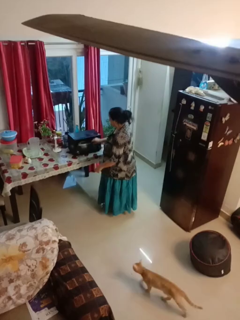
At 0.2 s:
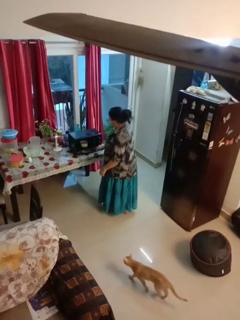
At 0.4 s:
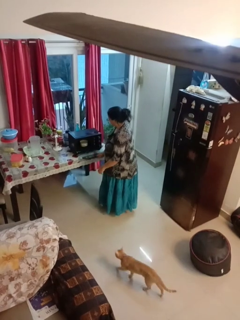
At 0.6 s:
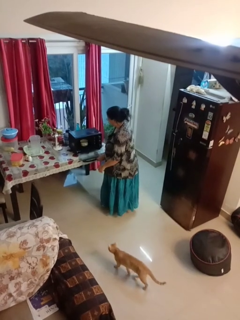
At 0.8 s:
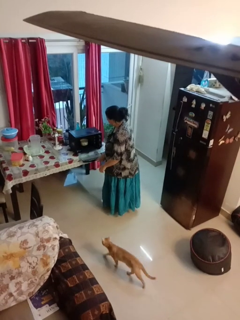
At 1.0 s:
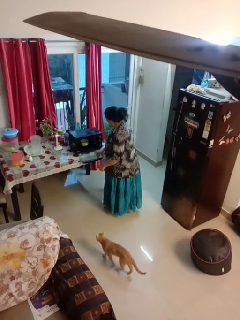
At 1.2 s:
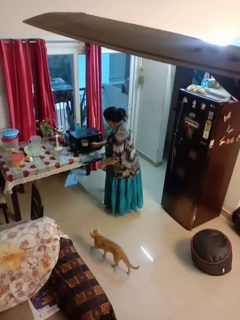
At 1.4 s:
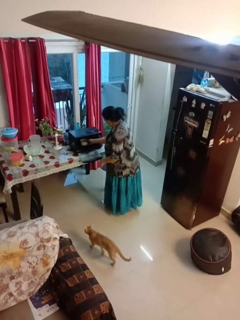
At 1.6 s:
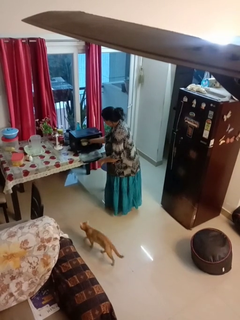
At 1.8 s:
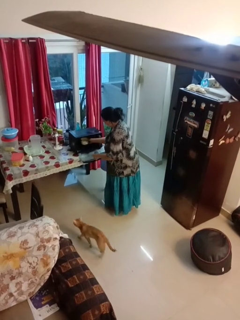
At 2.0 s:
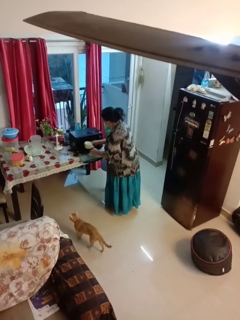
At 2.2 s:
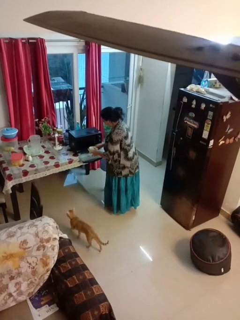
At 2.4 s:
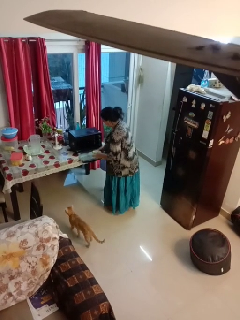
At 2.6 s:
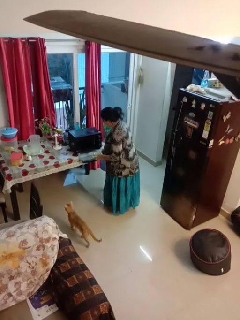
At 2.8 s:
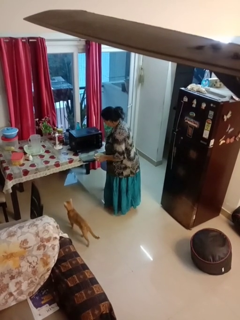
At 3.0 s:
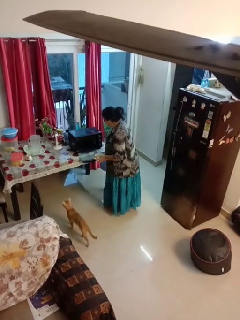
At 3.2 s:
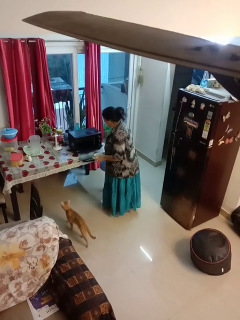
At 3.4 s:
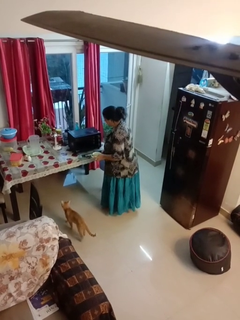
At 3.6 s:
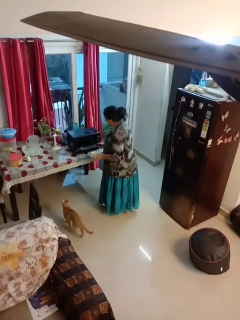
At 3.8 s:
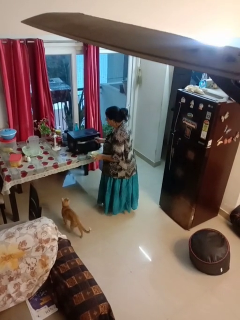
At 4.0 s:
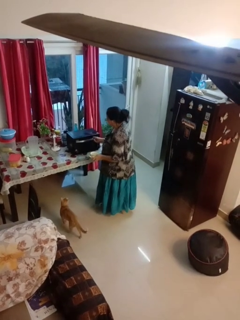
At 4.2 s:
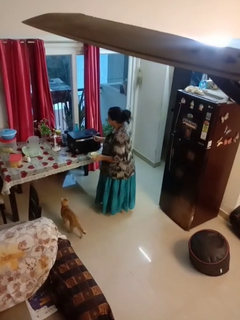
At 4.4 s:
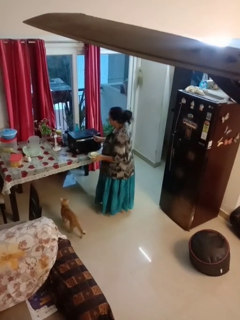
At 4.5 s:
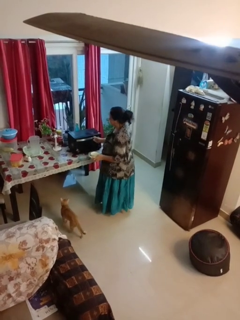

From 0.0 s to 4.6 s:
person takes object from microwave

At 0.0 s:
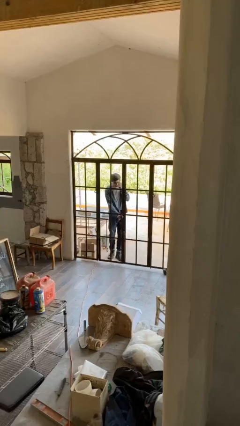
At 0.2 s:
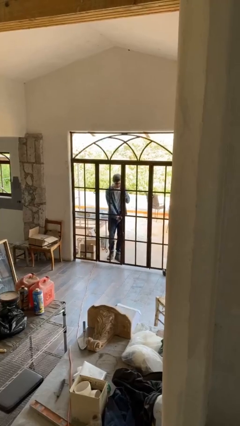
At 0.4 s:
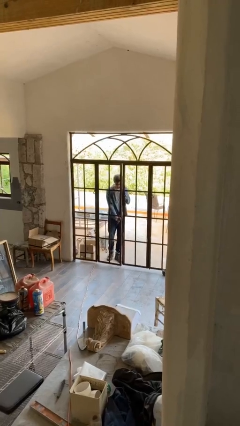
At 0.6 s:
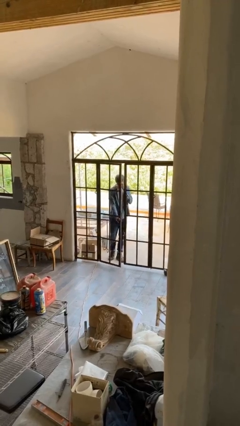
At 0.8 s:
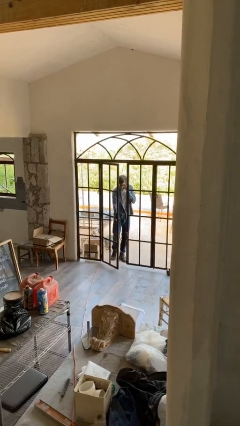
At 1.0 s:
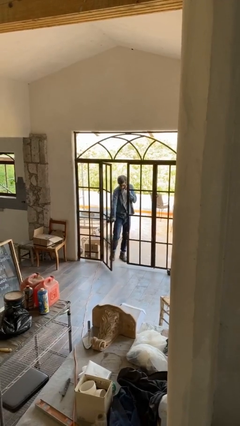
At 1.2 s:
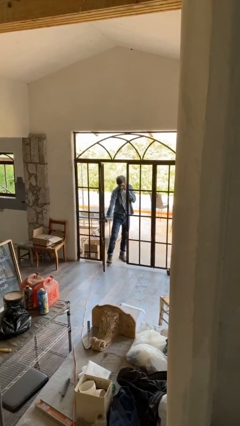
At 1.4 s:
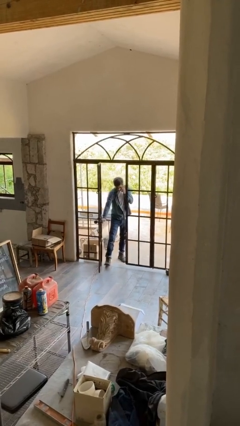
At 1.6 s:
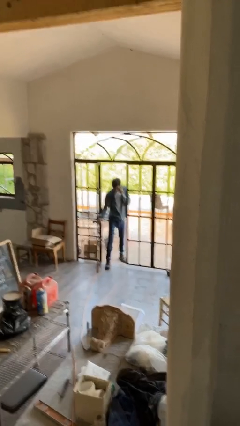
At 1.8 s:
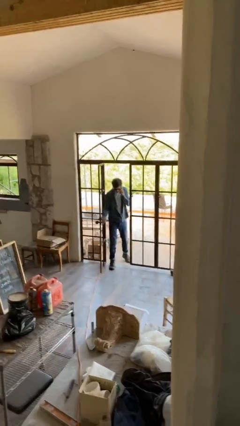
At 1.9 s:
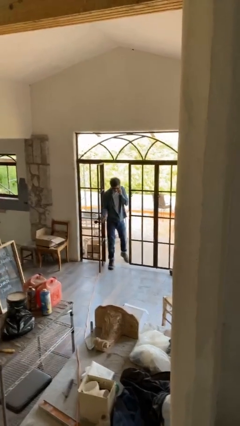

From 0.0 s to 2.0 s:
person opens facility door

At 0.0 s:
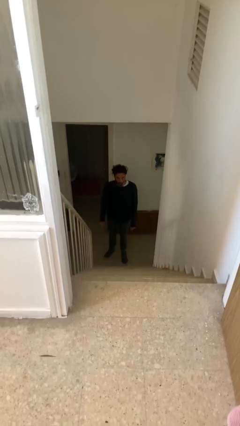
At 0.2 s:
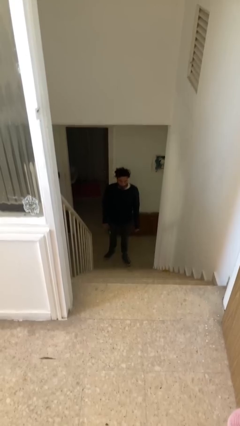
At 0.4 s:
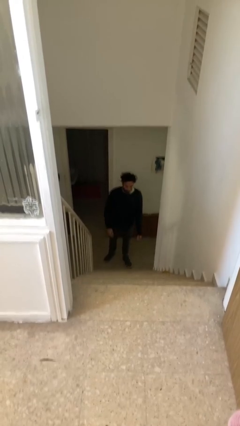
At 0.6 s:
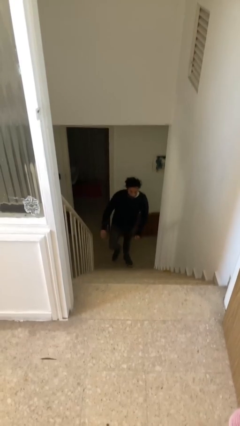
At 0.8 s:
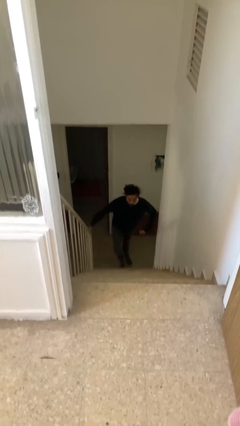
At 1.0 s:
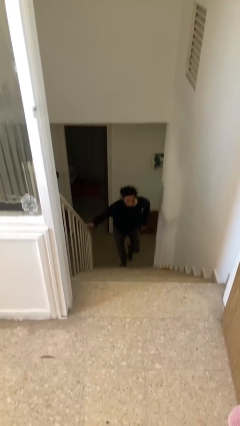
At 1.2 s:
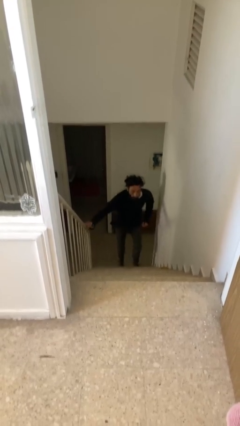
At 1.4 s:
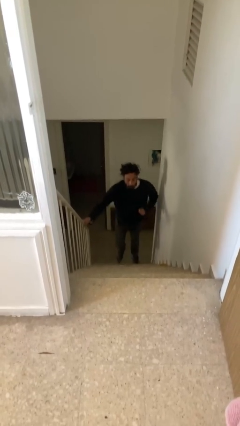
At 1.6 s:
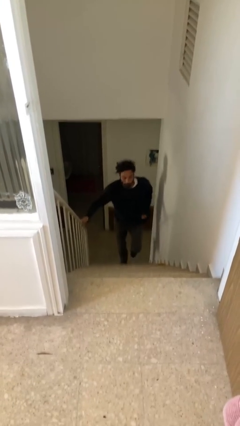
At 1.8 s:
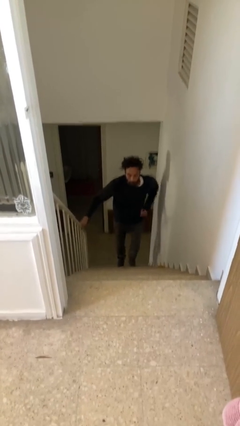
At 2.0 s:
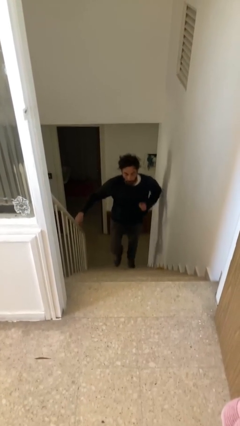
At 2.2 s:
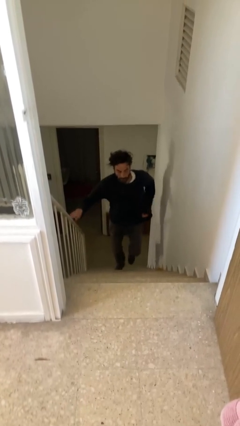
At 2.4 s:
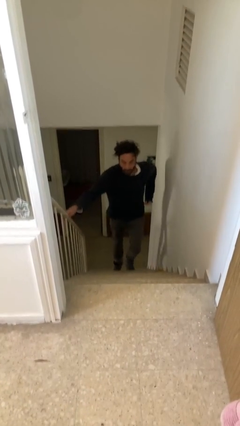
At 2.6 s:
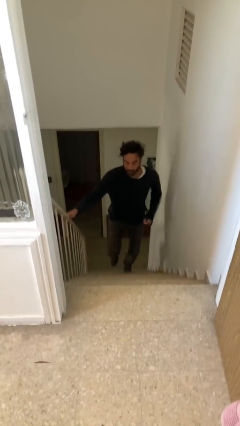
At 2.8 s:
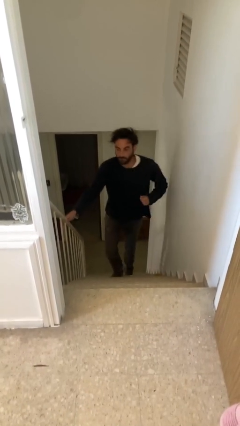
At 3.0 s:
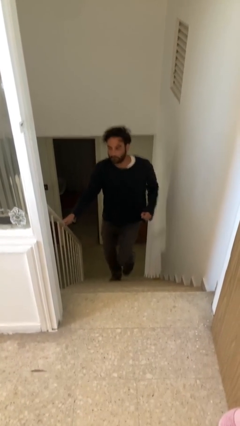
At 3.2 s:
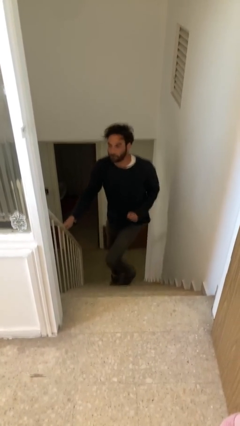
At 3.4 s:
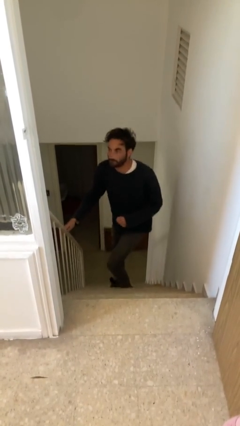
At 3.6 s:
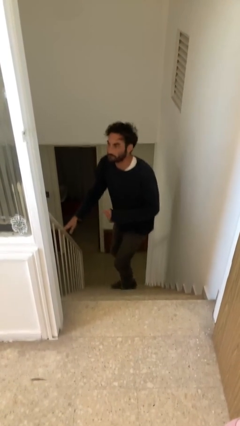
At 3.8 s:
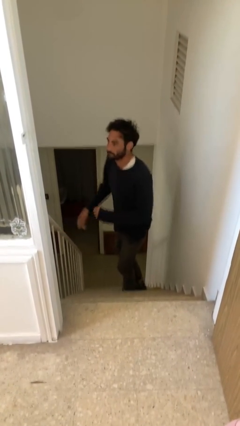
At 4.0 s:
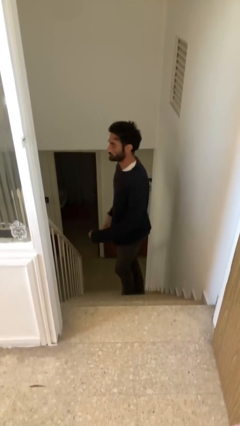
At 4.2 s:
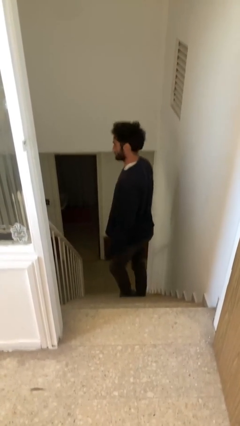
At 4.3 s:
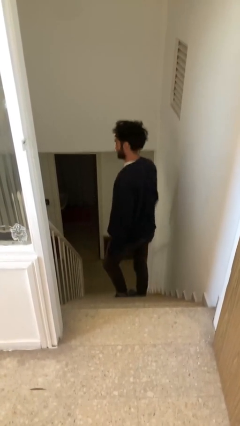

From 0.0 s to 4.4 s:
person climbs up stairs

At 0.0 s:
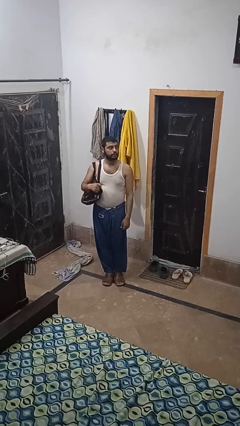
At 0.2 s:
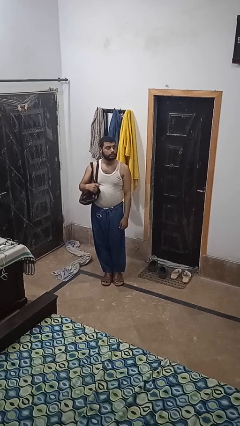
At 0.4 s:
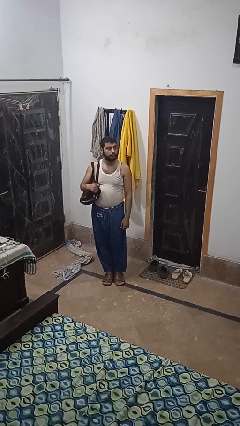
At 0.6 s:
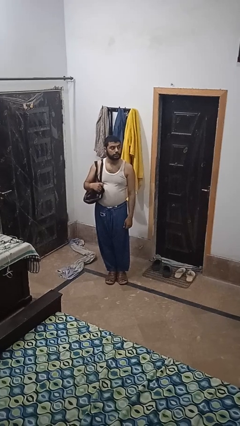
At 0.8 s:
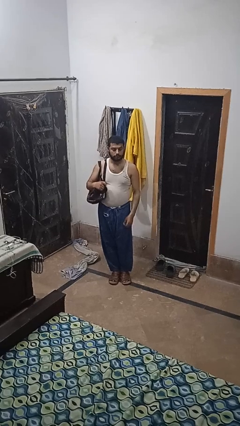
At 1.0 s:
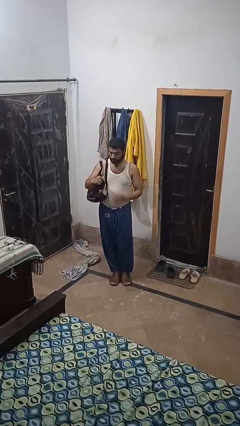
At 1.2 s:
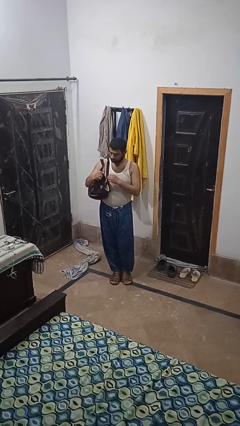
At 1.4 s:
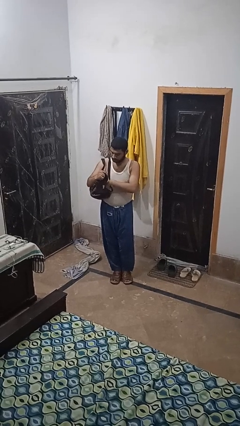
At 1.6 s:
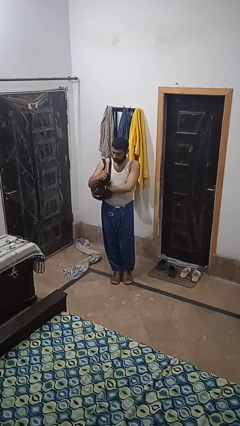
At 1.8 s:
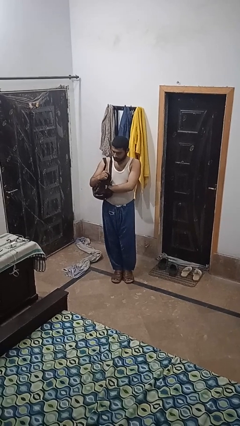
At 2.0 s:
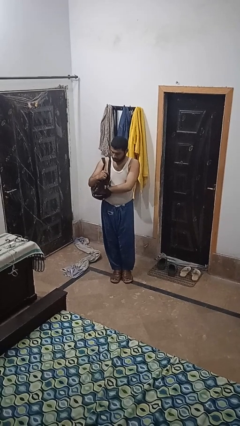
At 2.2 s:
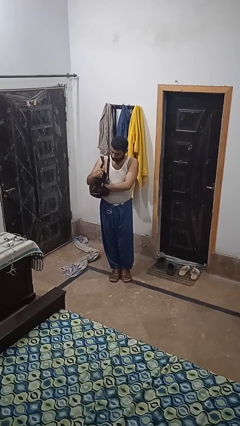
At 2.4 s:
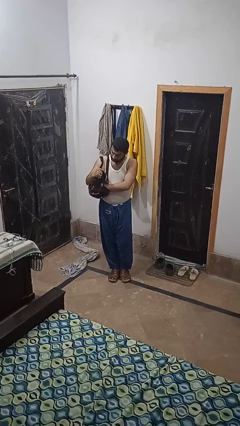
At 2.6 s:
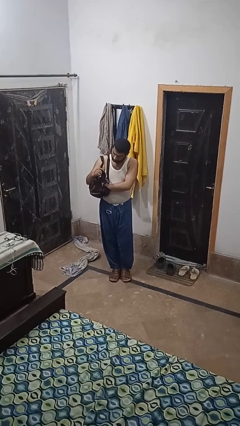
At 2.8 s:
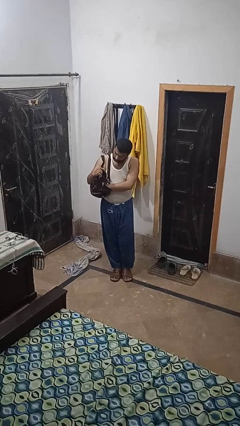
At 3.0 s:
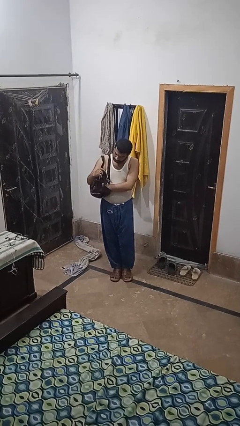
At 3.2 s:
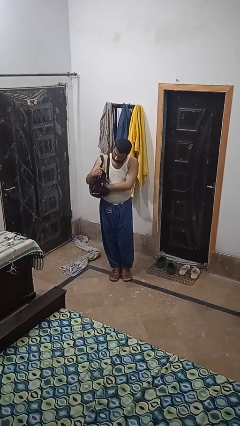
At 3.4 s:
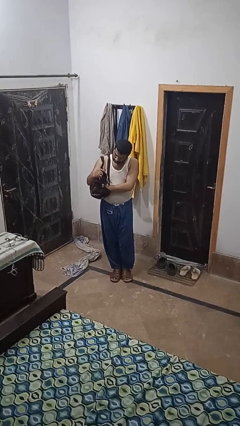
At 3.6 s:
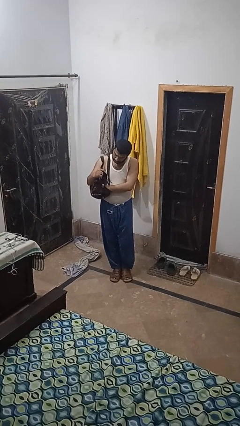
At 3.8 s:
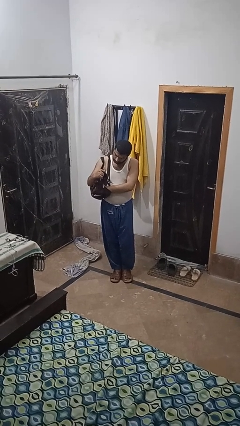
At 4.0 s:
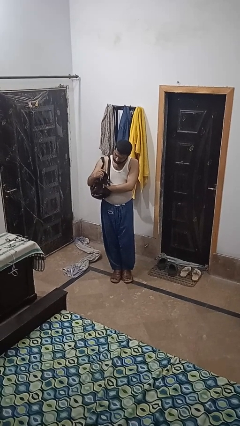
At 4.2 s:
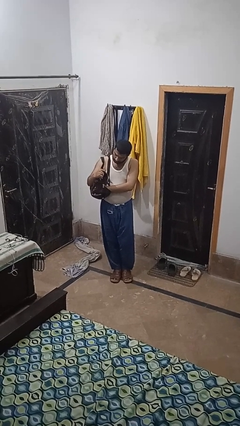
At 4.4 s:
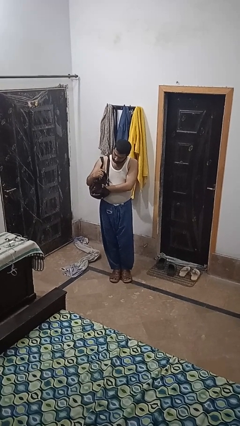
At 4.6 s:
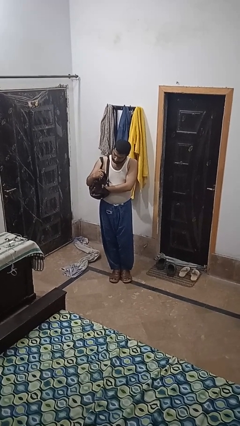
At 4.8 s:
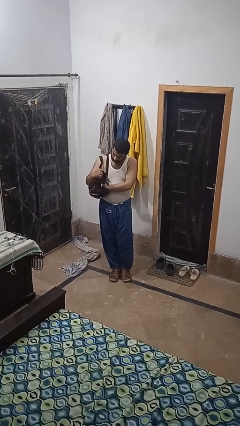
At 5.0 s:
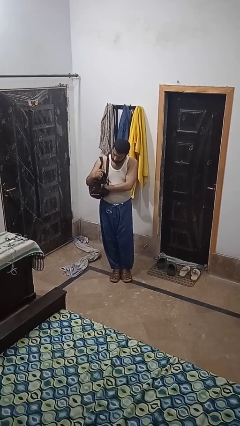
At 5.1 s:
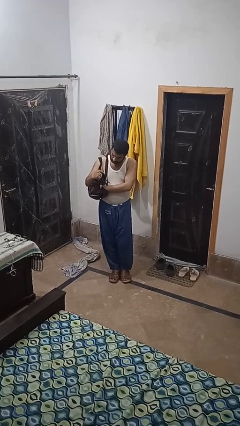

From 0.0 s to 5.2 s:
person searches in purse

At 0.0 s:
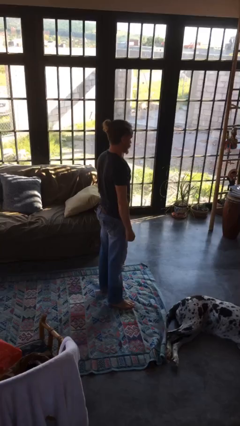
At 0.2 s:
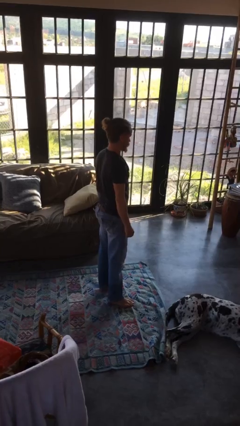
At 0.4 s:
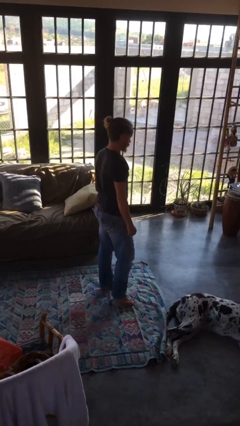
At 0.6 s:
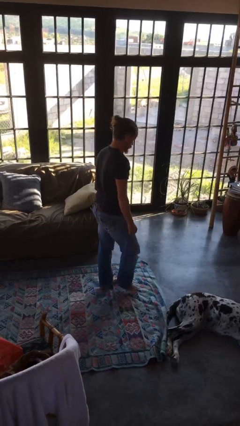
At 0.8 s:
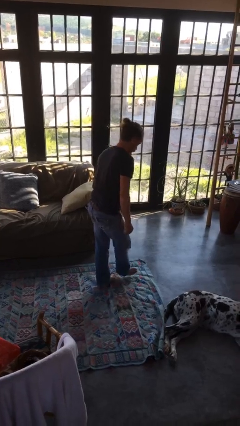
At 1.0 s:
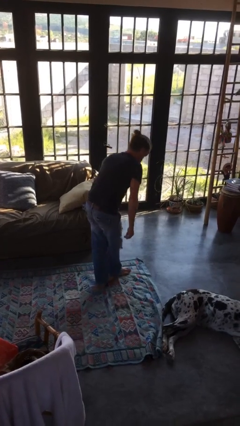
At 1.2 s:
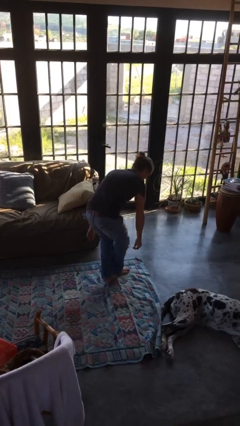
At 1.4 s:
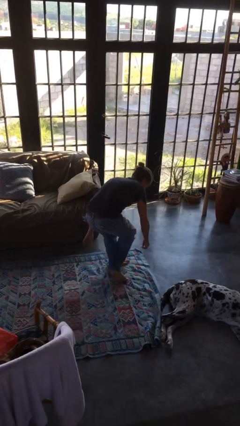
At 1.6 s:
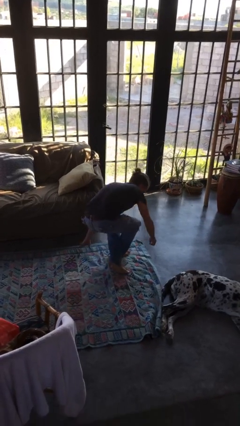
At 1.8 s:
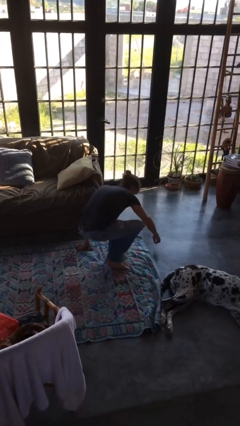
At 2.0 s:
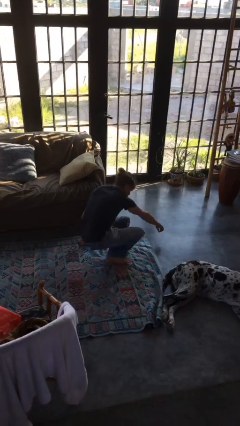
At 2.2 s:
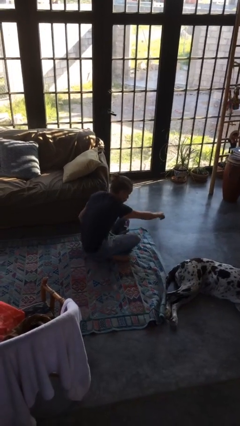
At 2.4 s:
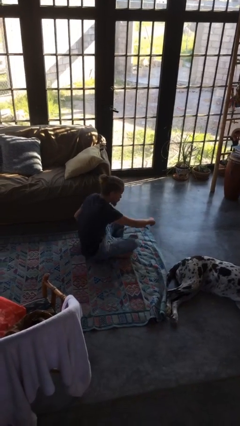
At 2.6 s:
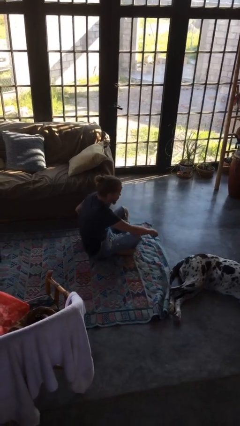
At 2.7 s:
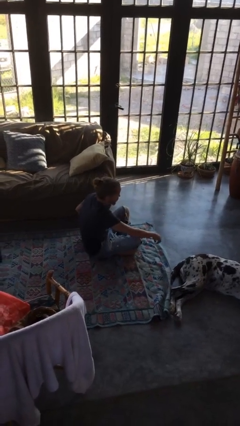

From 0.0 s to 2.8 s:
person sits crisscross
